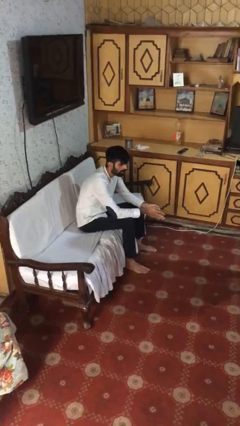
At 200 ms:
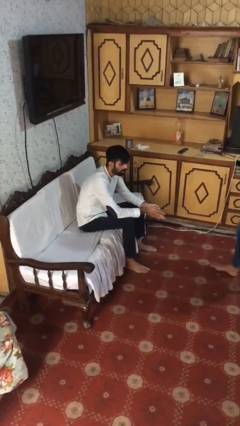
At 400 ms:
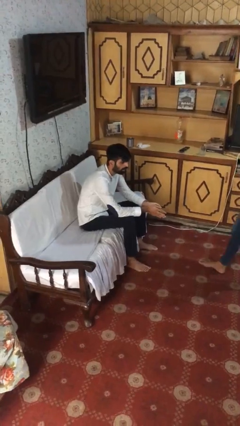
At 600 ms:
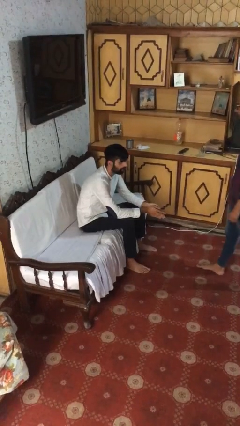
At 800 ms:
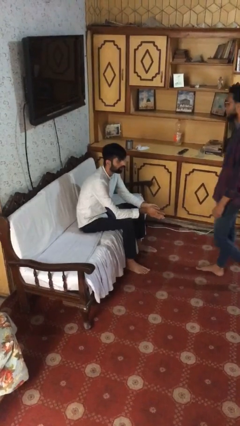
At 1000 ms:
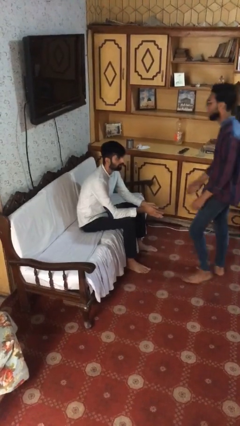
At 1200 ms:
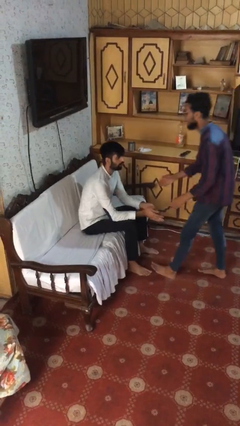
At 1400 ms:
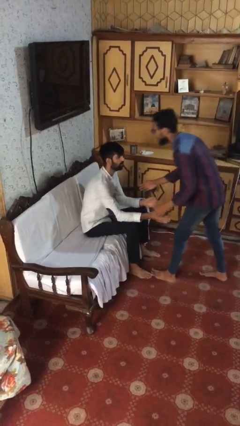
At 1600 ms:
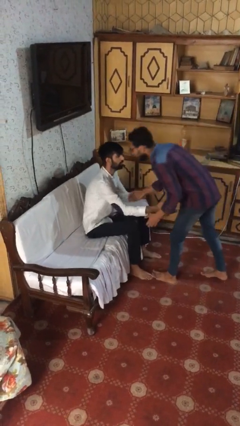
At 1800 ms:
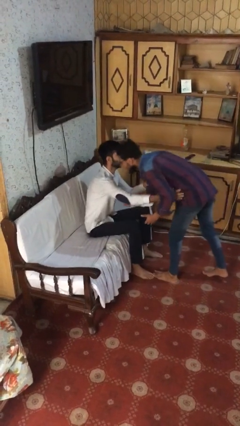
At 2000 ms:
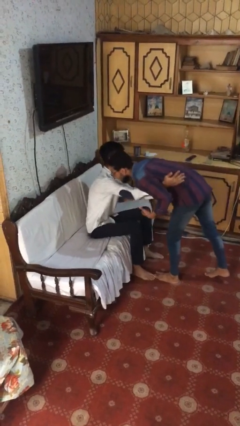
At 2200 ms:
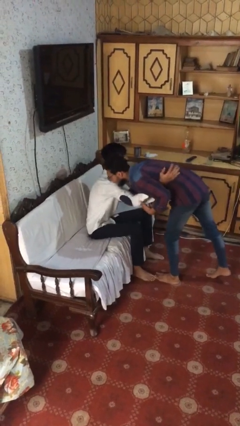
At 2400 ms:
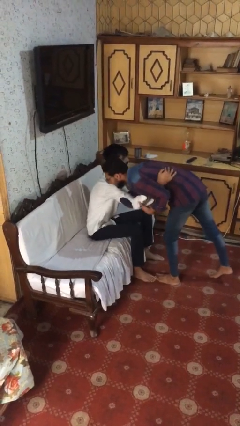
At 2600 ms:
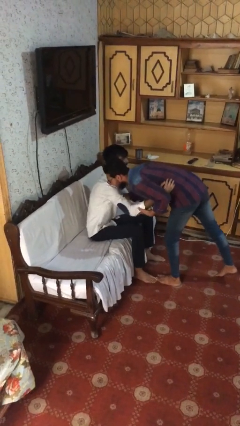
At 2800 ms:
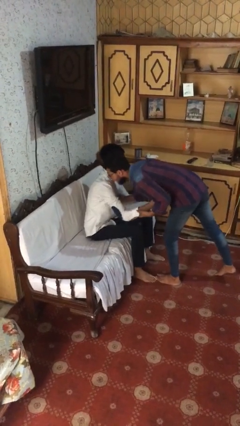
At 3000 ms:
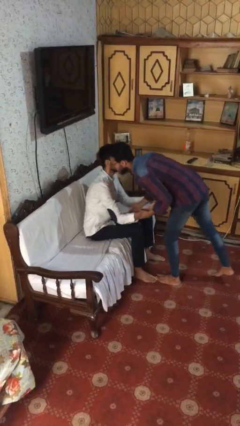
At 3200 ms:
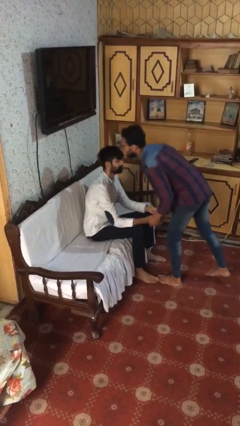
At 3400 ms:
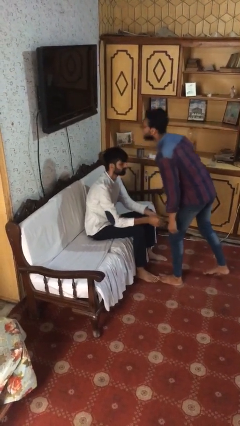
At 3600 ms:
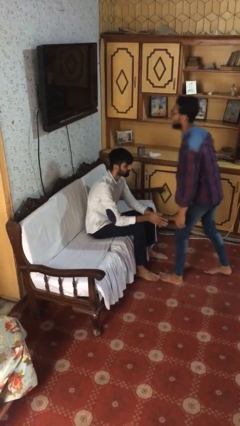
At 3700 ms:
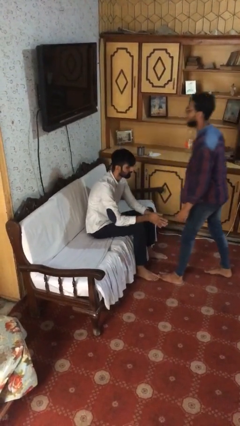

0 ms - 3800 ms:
person embraces person

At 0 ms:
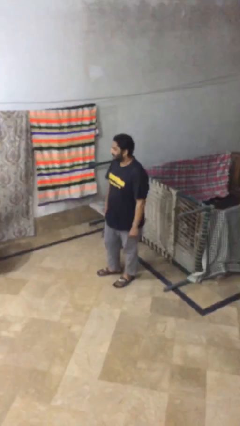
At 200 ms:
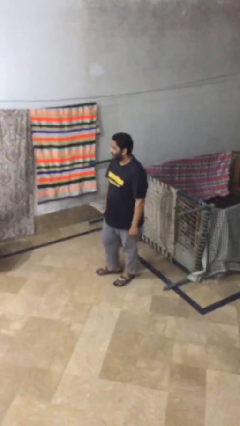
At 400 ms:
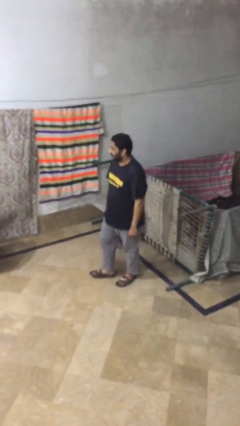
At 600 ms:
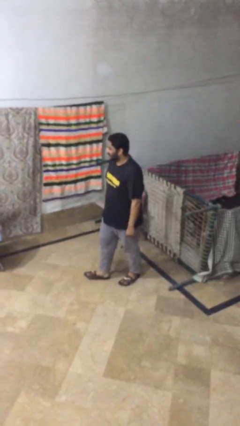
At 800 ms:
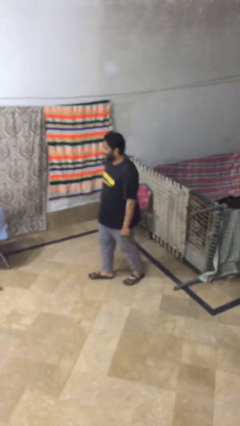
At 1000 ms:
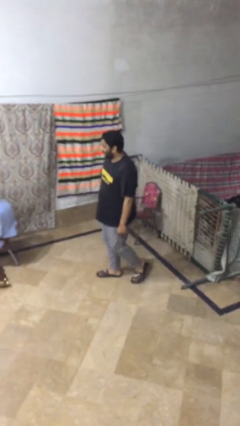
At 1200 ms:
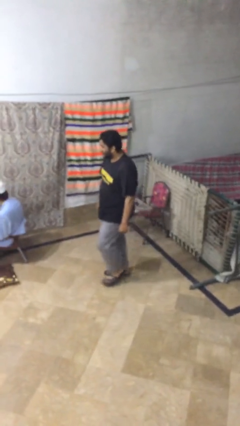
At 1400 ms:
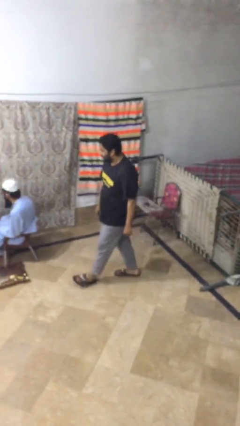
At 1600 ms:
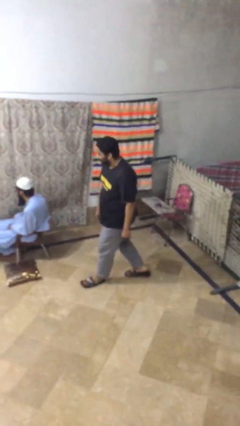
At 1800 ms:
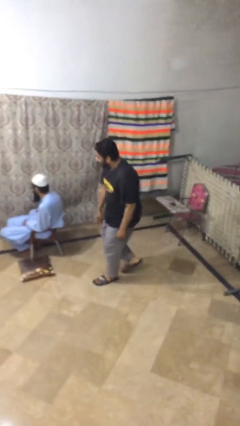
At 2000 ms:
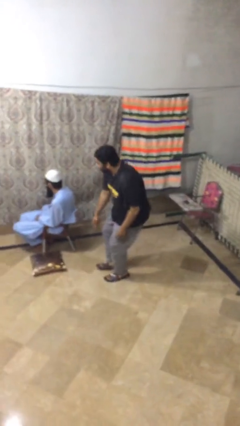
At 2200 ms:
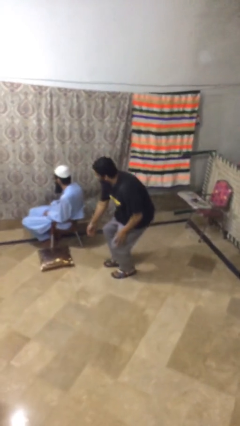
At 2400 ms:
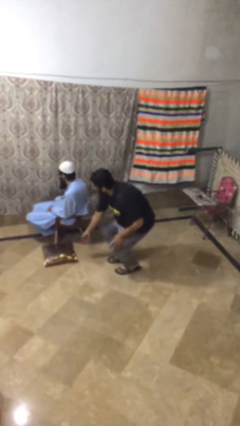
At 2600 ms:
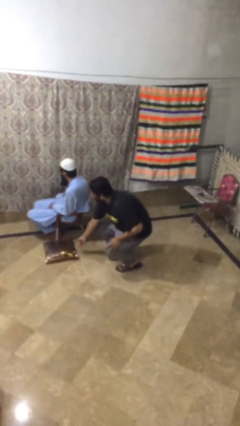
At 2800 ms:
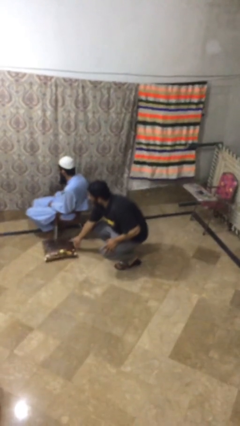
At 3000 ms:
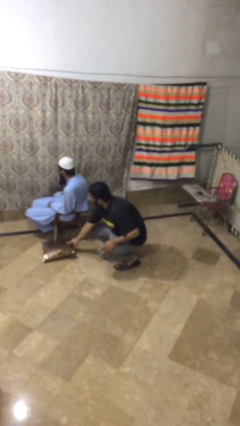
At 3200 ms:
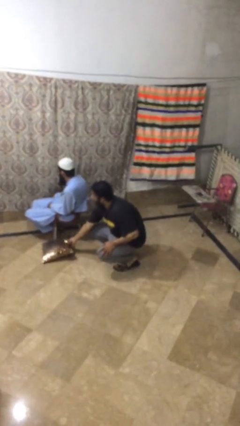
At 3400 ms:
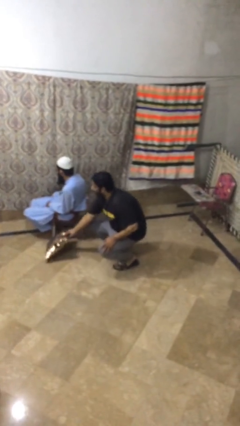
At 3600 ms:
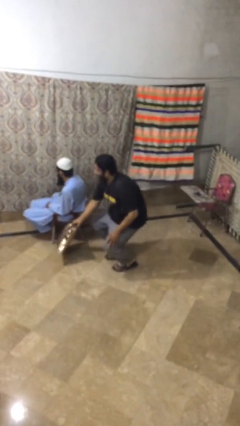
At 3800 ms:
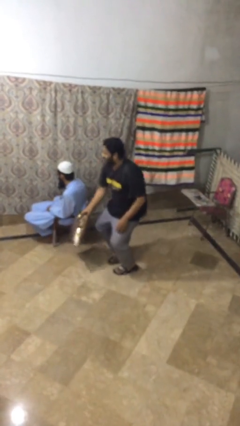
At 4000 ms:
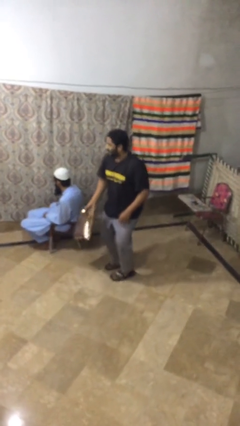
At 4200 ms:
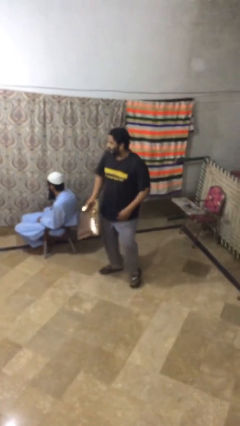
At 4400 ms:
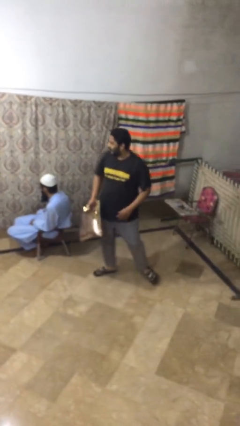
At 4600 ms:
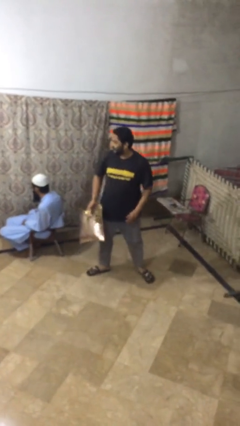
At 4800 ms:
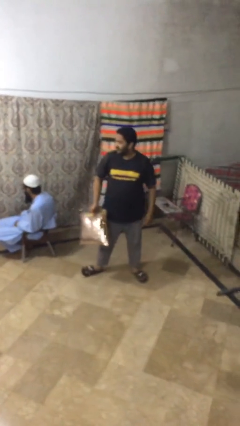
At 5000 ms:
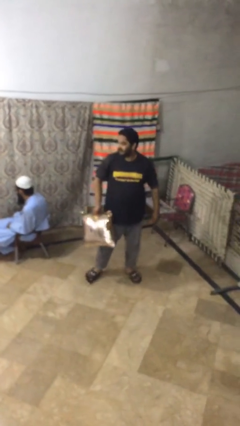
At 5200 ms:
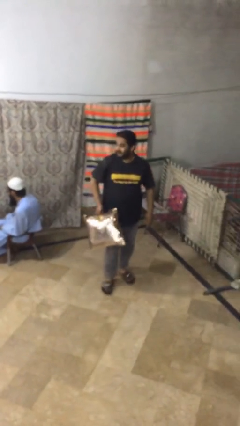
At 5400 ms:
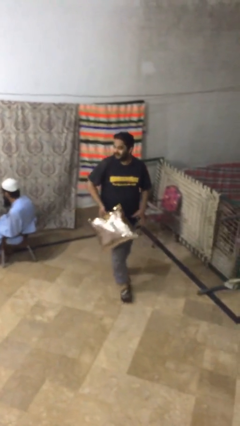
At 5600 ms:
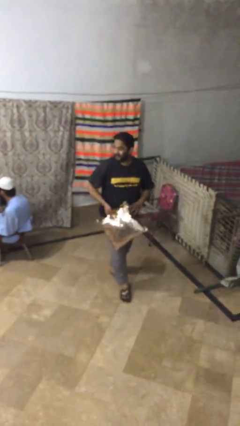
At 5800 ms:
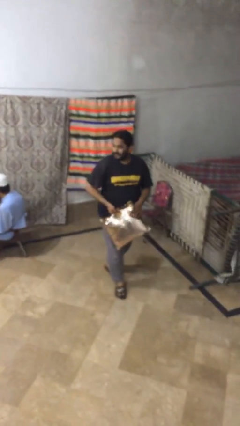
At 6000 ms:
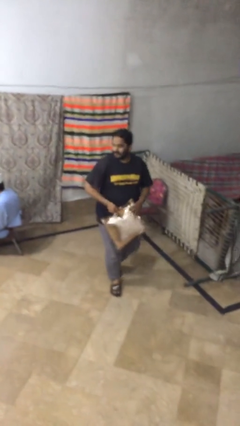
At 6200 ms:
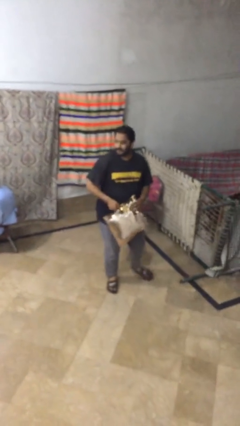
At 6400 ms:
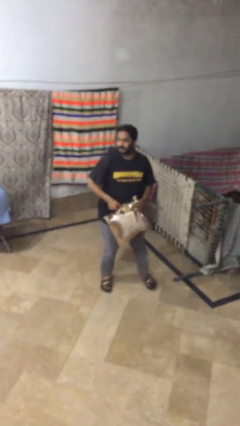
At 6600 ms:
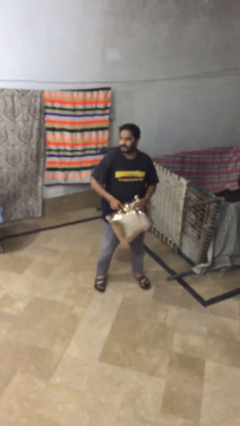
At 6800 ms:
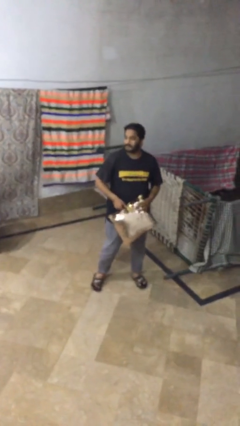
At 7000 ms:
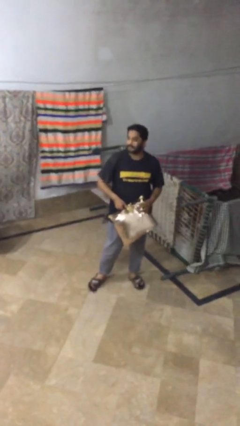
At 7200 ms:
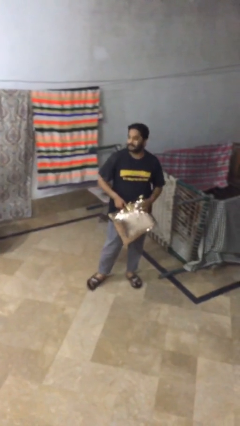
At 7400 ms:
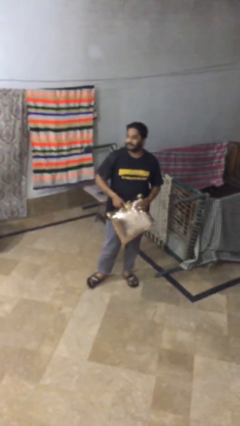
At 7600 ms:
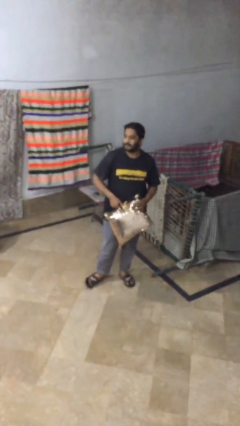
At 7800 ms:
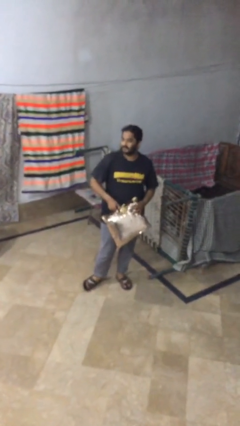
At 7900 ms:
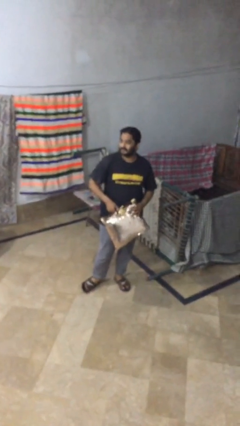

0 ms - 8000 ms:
person steals object from person

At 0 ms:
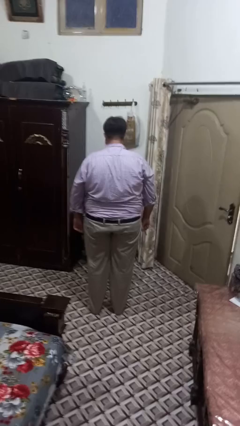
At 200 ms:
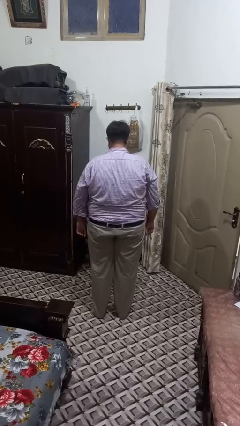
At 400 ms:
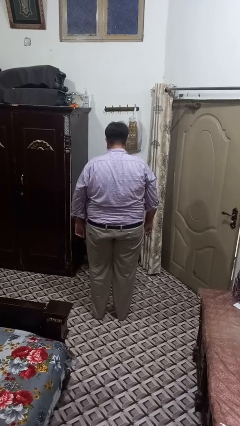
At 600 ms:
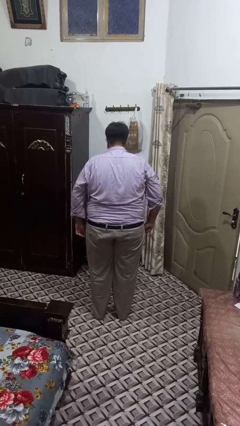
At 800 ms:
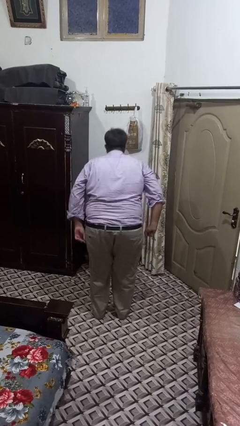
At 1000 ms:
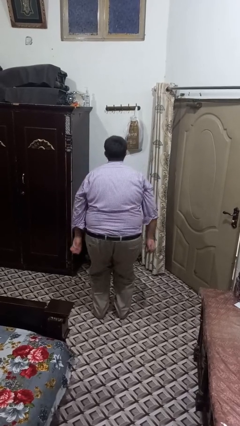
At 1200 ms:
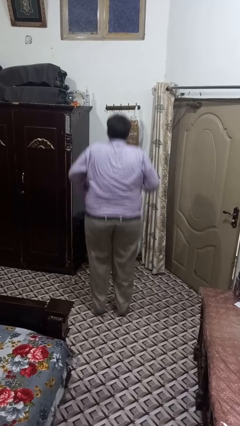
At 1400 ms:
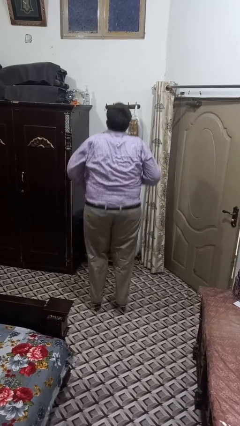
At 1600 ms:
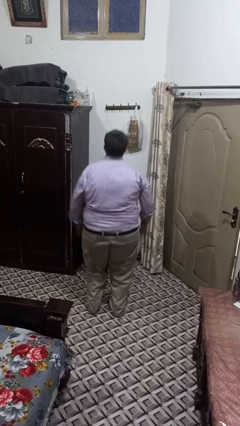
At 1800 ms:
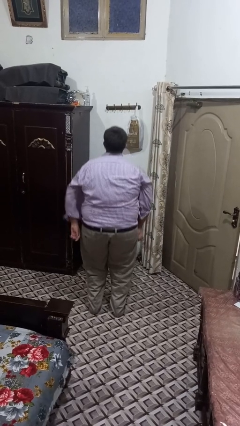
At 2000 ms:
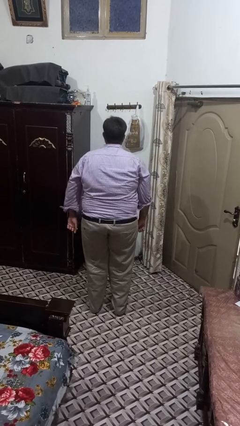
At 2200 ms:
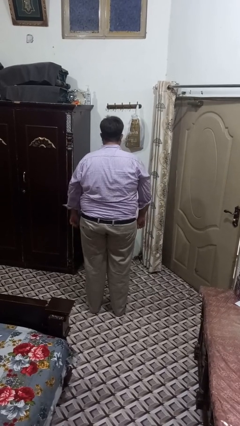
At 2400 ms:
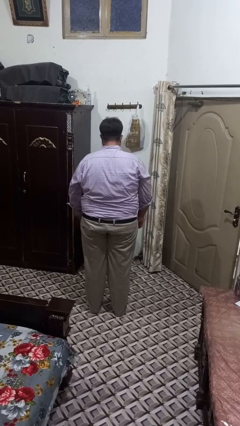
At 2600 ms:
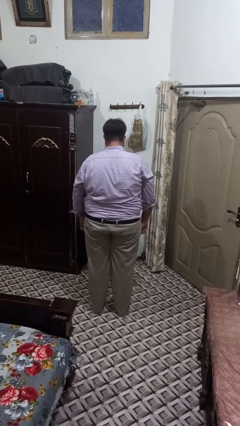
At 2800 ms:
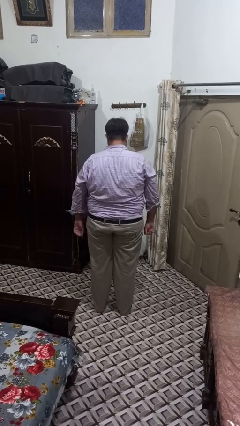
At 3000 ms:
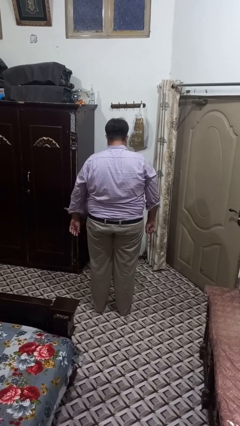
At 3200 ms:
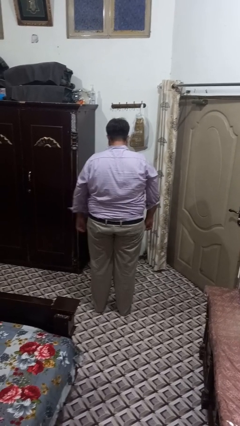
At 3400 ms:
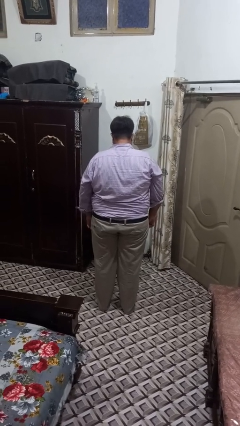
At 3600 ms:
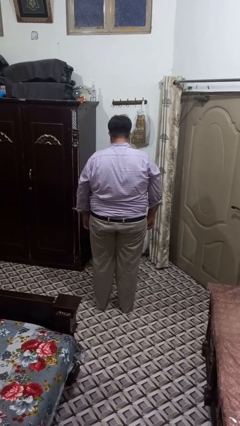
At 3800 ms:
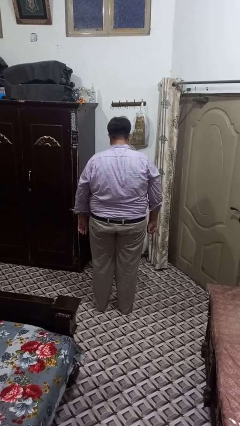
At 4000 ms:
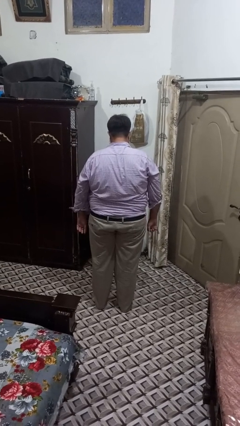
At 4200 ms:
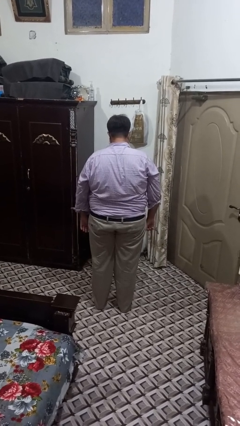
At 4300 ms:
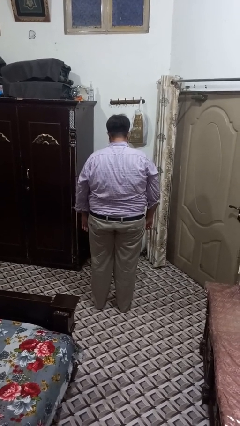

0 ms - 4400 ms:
person jumps

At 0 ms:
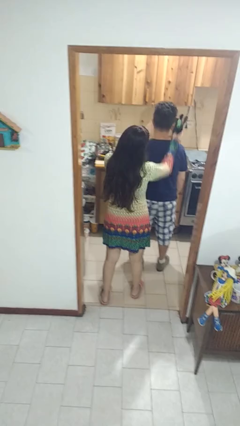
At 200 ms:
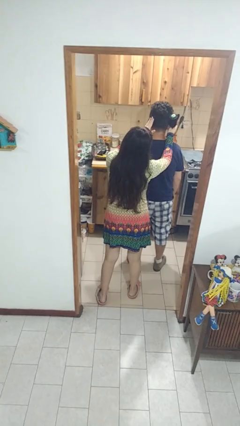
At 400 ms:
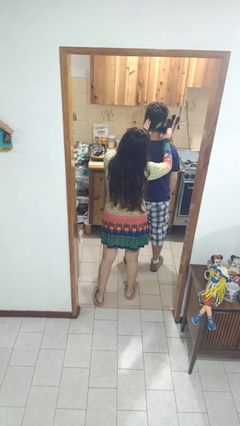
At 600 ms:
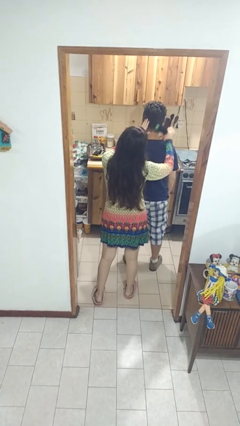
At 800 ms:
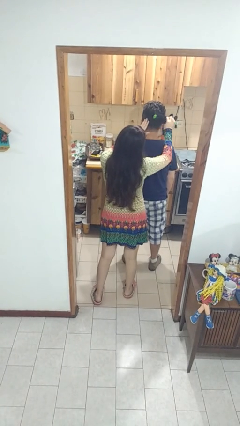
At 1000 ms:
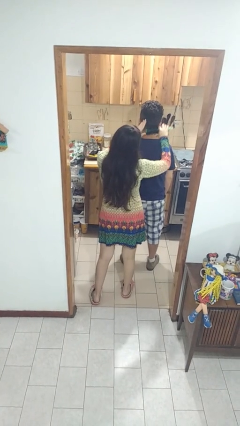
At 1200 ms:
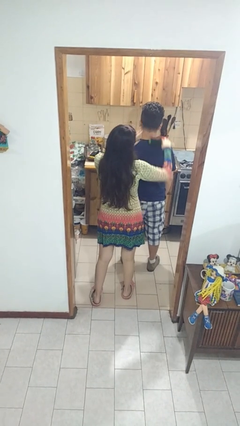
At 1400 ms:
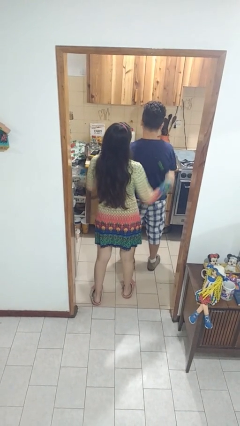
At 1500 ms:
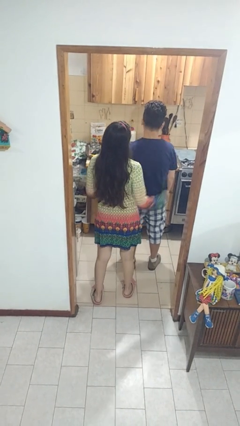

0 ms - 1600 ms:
person brushes hair of person
